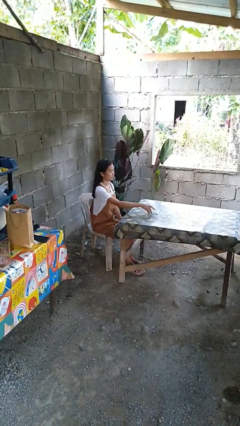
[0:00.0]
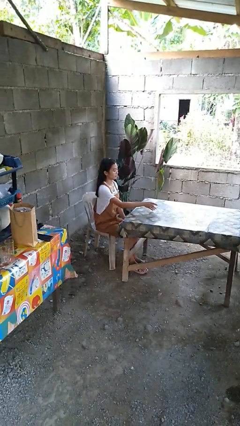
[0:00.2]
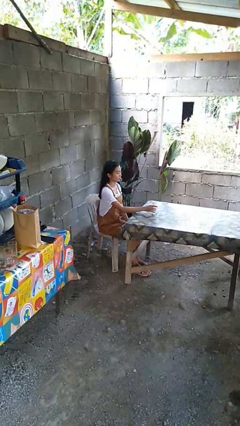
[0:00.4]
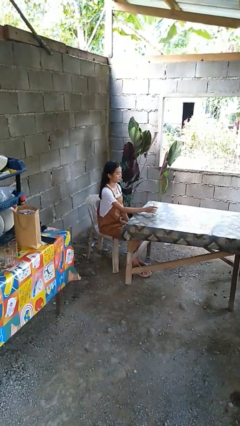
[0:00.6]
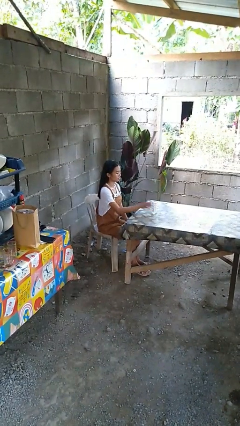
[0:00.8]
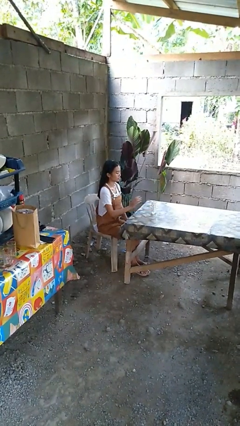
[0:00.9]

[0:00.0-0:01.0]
person sets upright glass

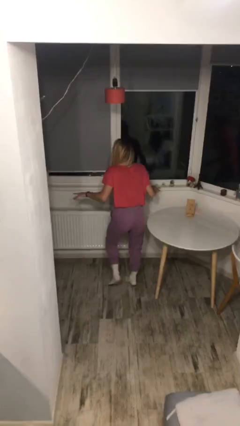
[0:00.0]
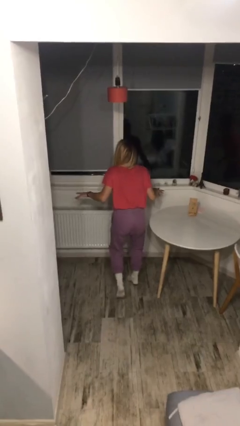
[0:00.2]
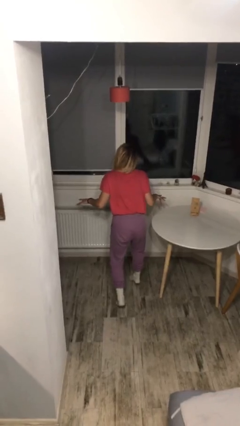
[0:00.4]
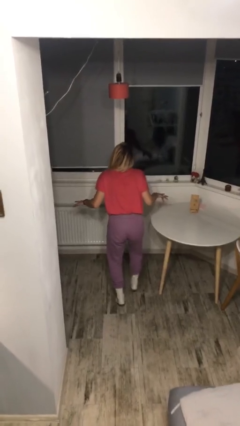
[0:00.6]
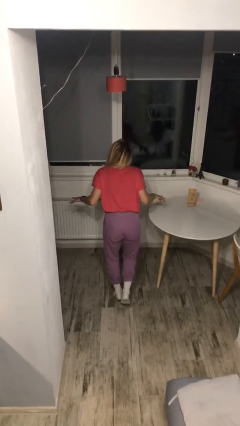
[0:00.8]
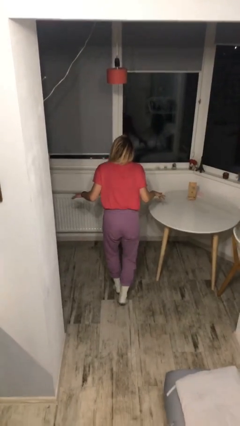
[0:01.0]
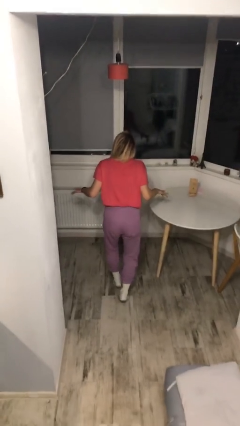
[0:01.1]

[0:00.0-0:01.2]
person walks tiptoe

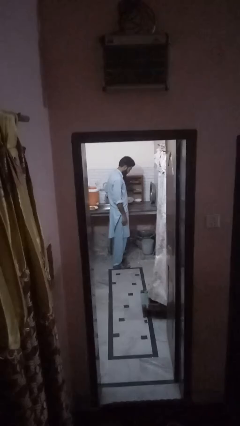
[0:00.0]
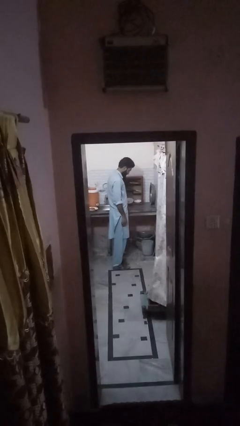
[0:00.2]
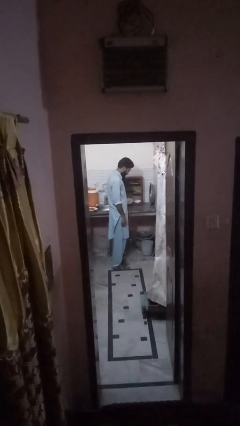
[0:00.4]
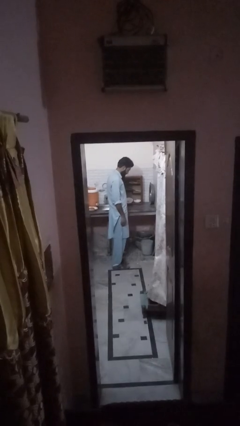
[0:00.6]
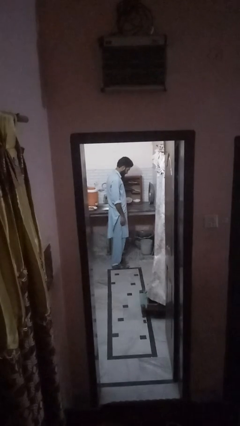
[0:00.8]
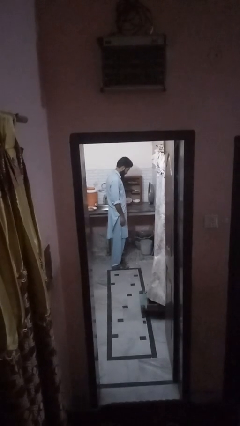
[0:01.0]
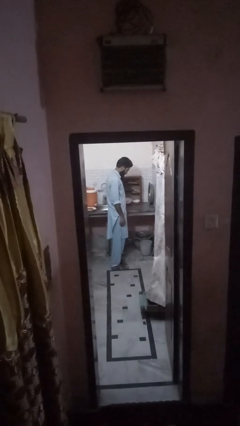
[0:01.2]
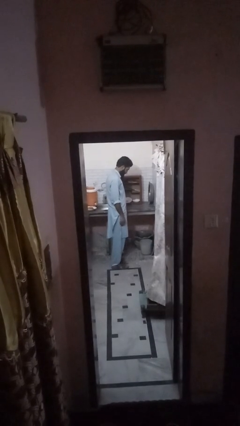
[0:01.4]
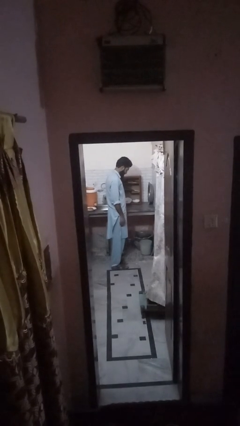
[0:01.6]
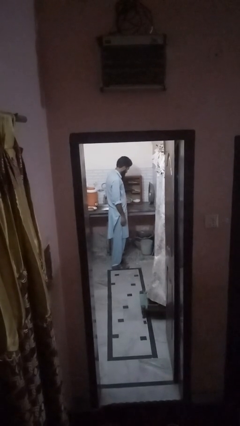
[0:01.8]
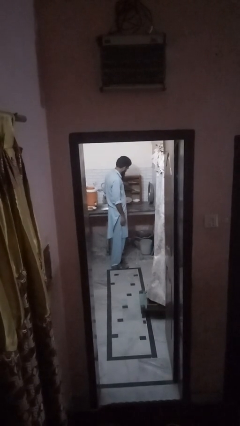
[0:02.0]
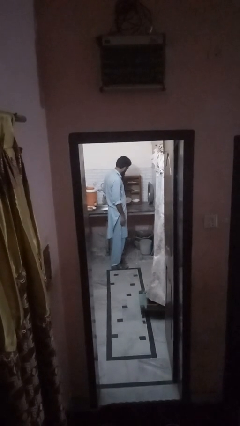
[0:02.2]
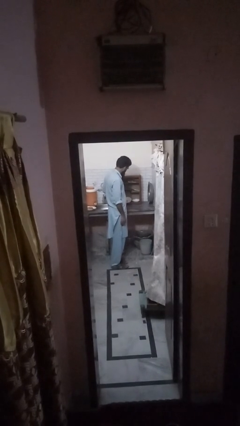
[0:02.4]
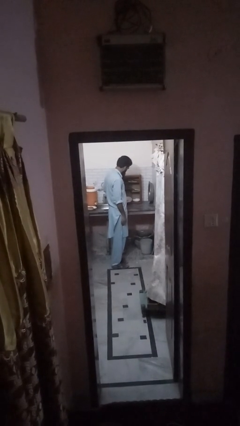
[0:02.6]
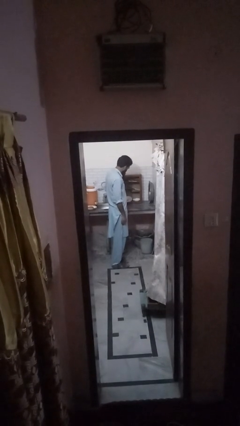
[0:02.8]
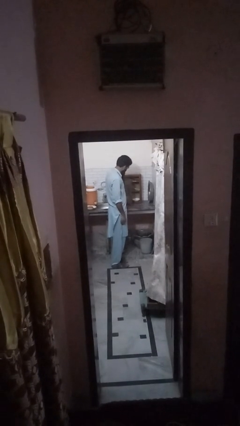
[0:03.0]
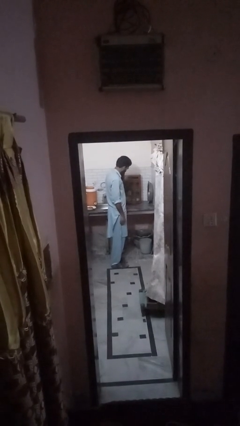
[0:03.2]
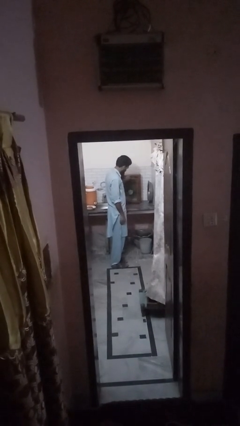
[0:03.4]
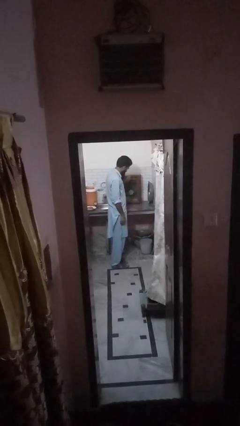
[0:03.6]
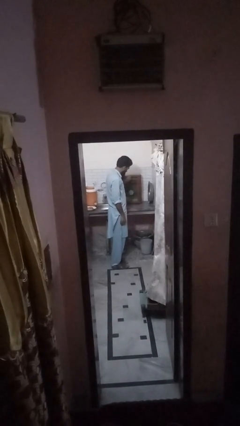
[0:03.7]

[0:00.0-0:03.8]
person closes cabinet

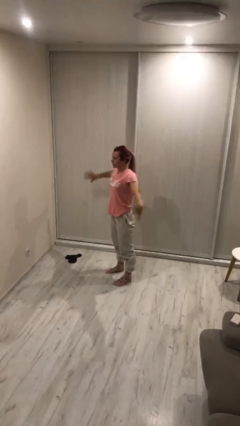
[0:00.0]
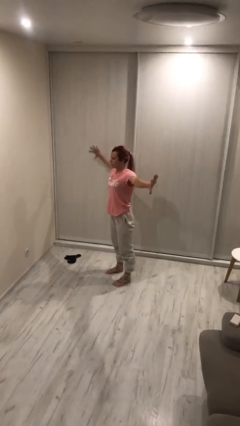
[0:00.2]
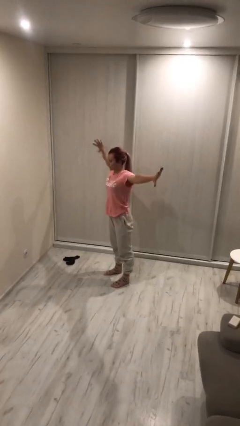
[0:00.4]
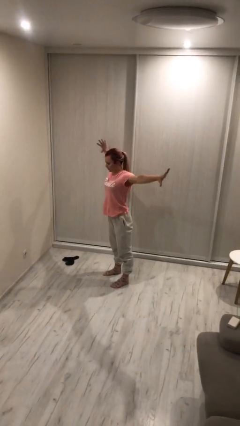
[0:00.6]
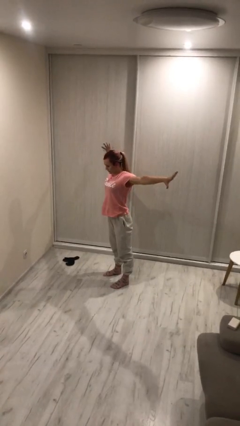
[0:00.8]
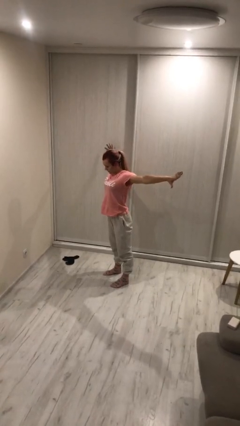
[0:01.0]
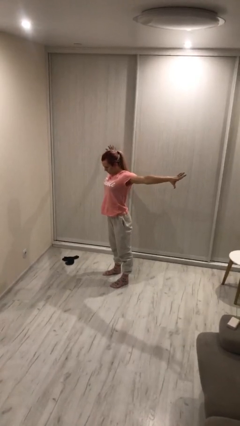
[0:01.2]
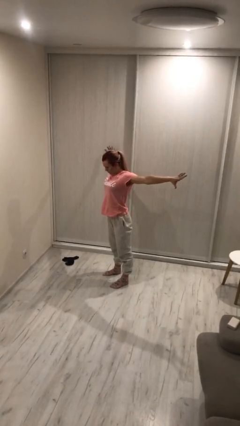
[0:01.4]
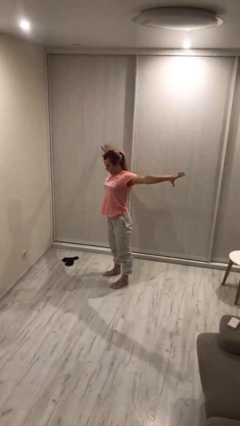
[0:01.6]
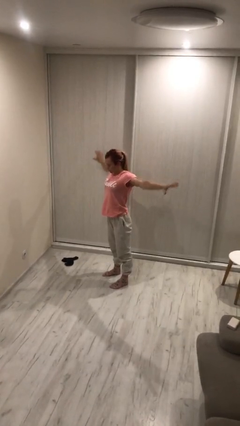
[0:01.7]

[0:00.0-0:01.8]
person stretches arms to side

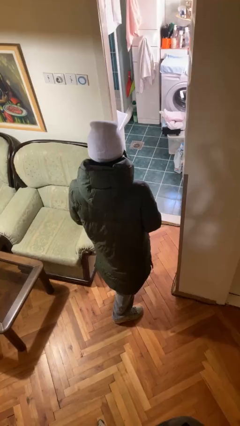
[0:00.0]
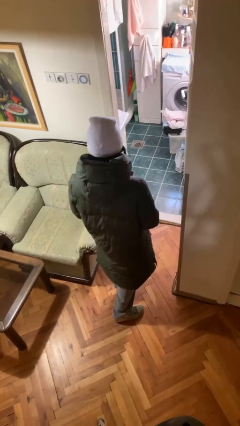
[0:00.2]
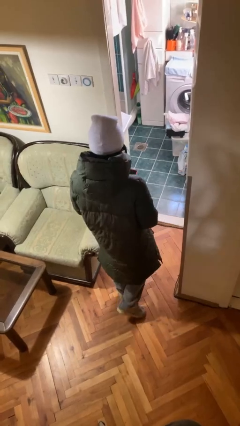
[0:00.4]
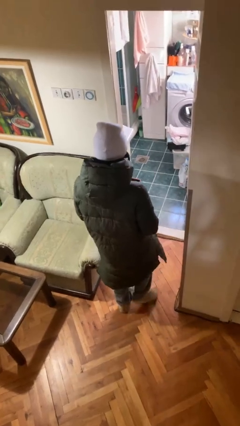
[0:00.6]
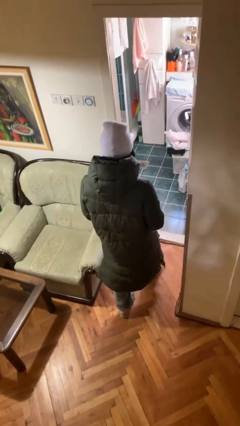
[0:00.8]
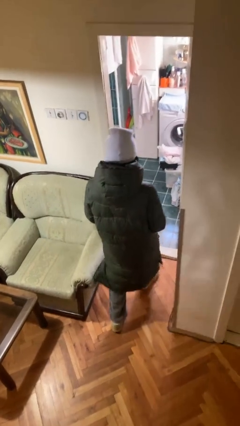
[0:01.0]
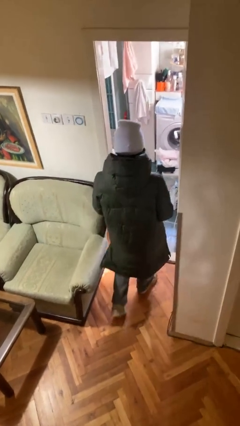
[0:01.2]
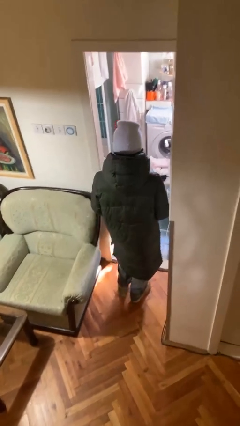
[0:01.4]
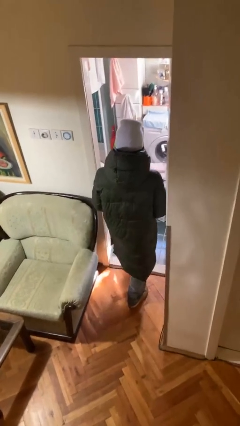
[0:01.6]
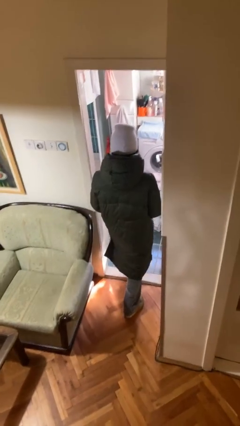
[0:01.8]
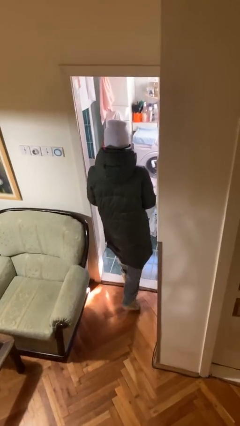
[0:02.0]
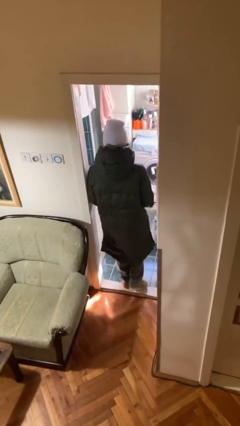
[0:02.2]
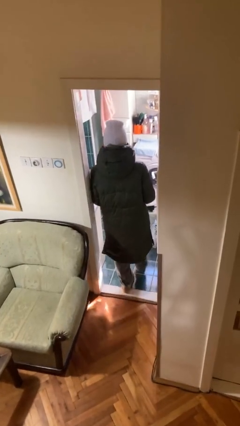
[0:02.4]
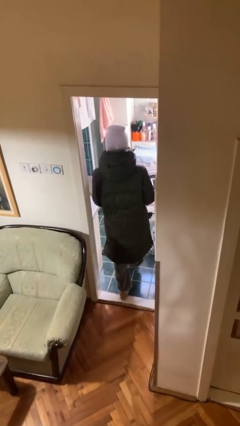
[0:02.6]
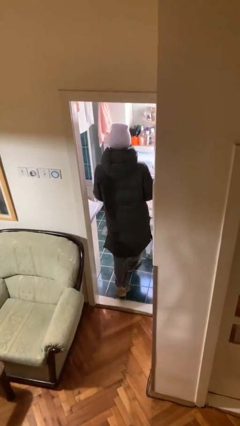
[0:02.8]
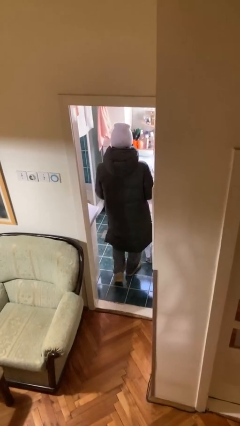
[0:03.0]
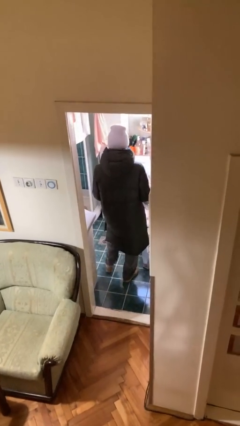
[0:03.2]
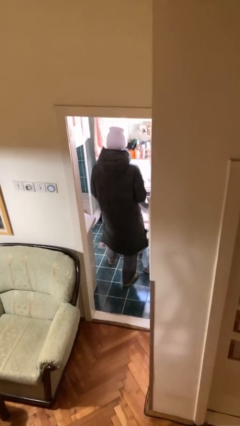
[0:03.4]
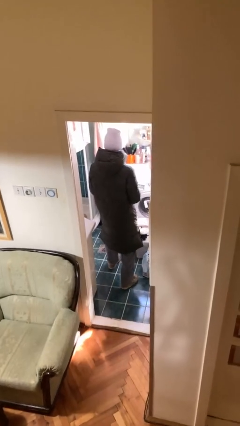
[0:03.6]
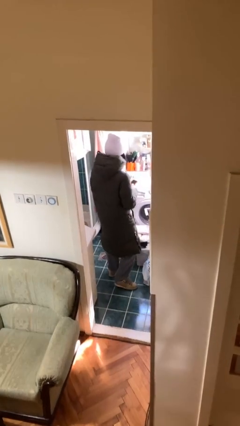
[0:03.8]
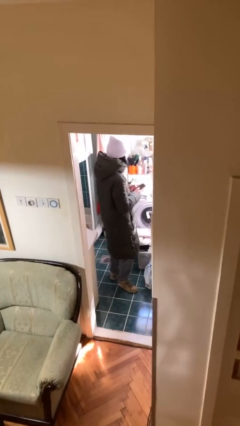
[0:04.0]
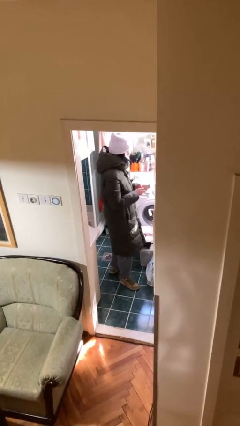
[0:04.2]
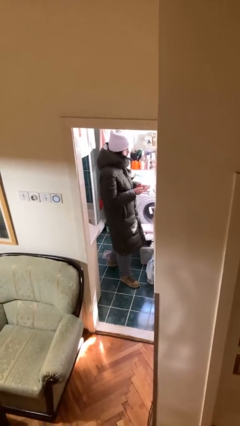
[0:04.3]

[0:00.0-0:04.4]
person exits scene through structure

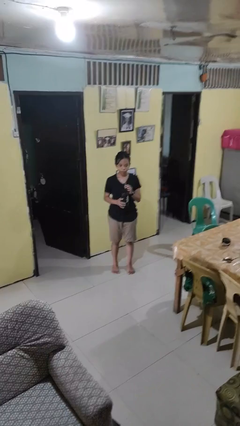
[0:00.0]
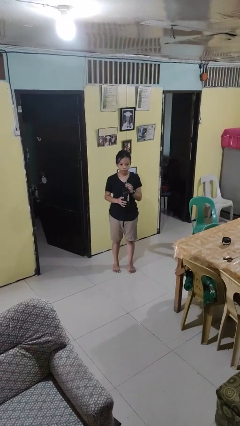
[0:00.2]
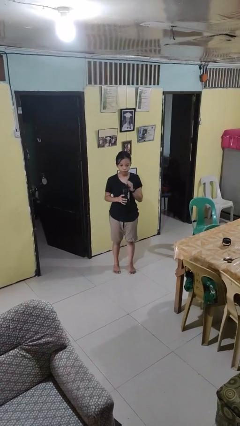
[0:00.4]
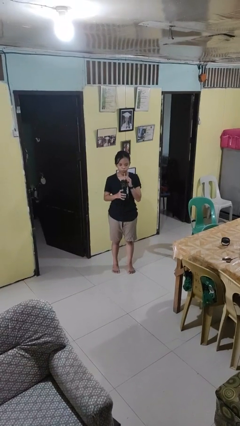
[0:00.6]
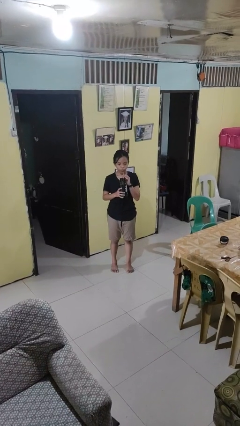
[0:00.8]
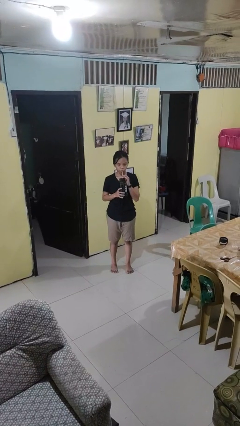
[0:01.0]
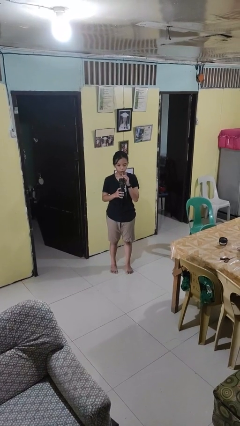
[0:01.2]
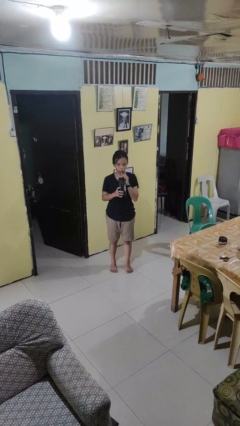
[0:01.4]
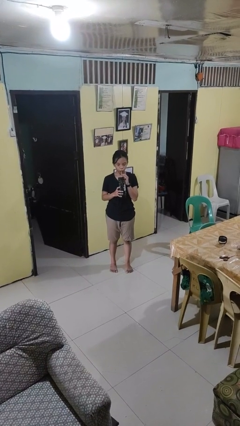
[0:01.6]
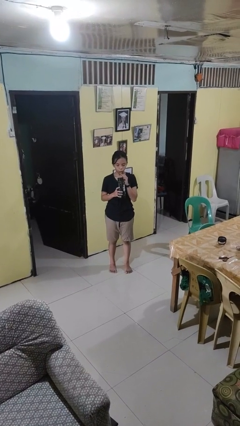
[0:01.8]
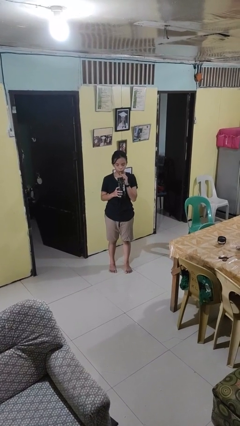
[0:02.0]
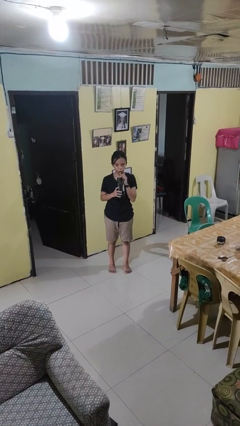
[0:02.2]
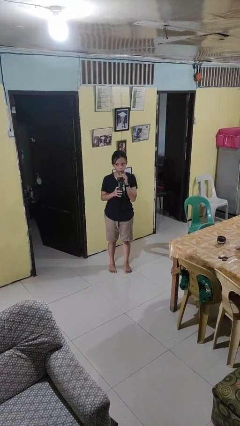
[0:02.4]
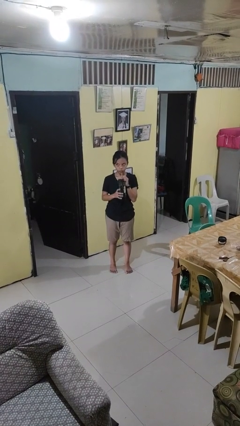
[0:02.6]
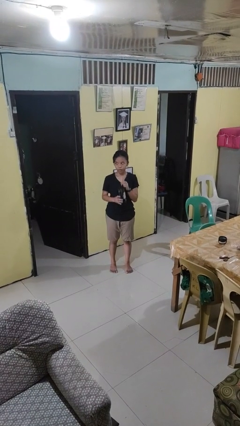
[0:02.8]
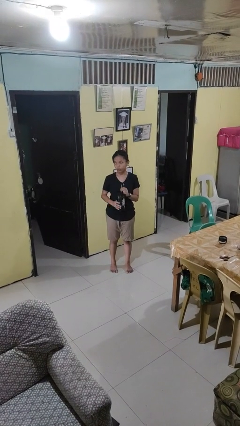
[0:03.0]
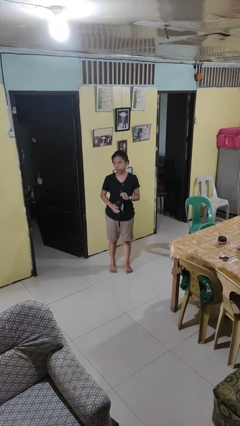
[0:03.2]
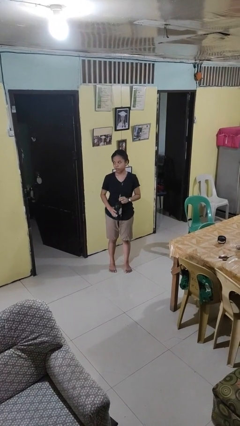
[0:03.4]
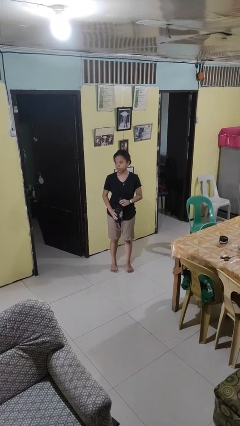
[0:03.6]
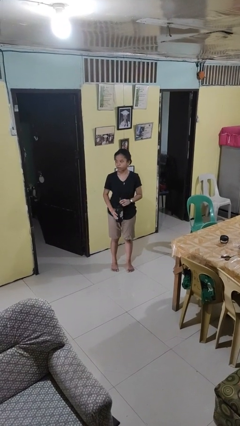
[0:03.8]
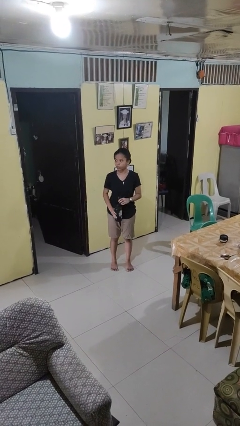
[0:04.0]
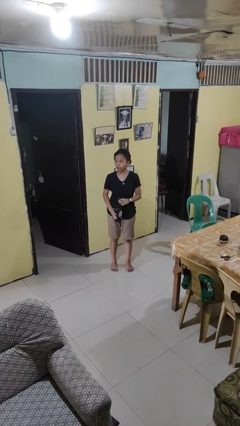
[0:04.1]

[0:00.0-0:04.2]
person drinks from straw

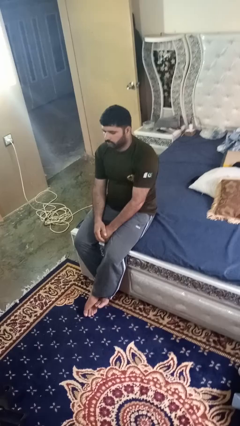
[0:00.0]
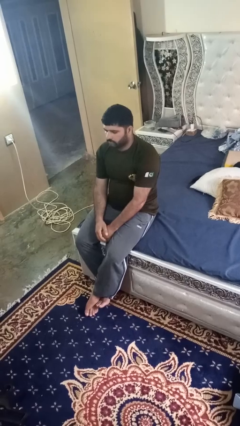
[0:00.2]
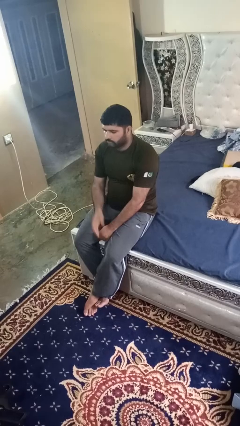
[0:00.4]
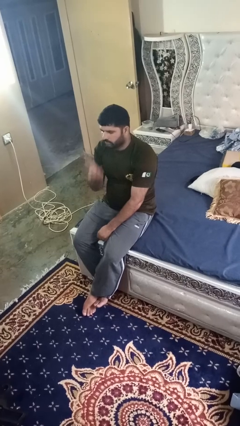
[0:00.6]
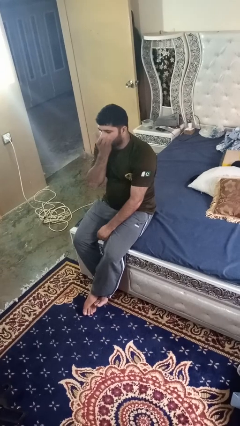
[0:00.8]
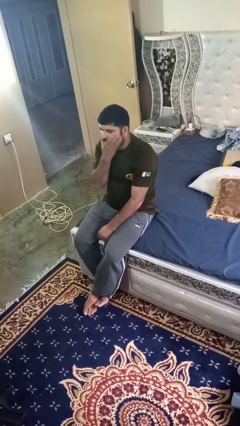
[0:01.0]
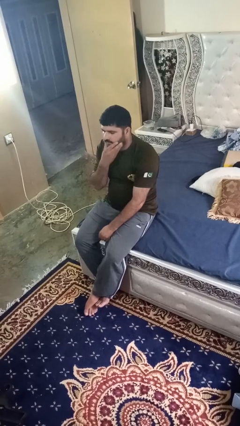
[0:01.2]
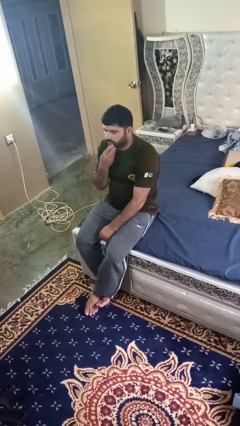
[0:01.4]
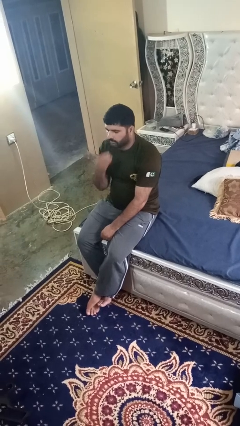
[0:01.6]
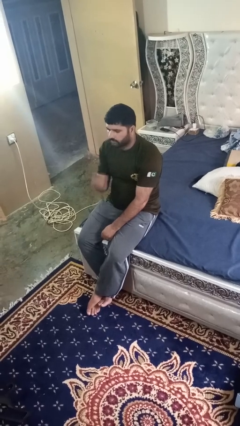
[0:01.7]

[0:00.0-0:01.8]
person strokes chin
